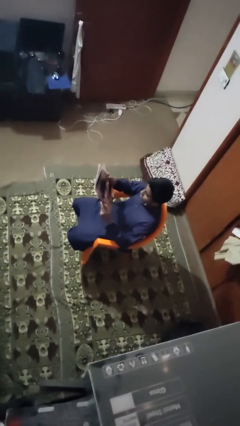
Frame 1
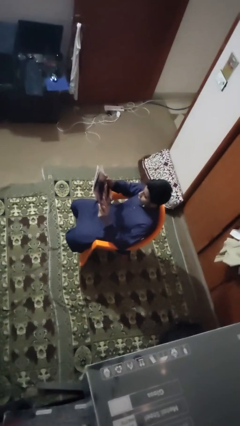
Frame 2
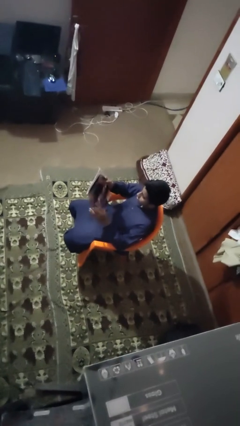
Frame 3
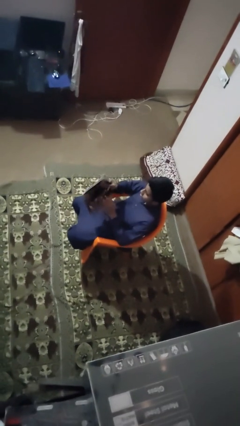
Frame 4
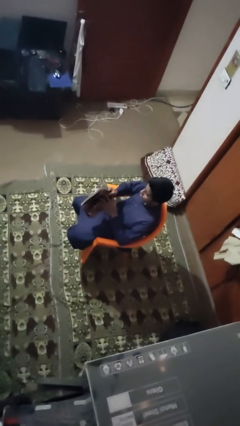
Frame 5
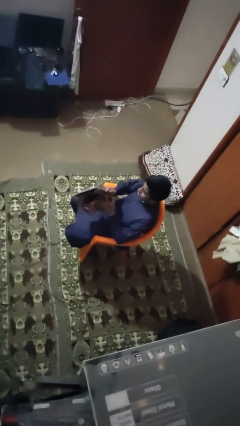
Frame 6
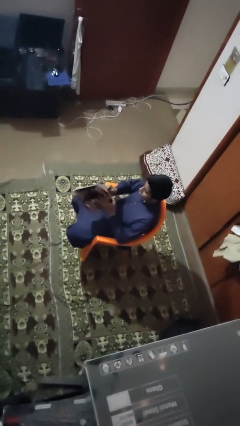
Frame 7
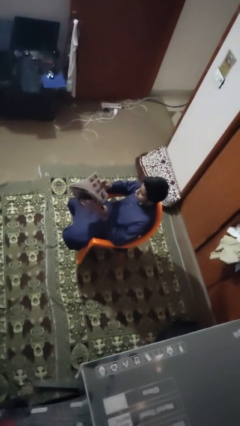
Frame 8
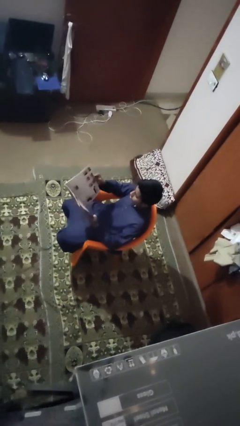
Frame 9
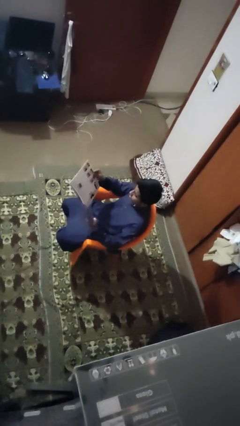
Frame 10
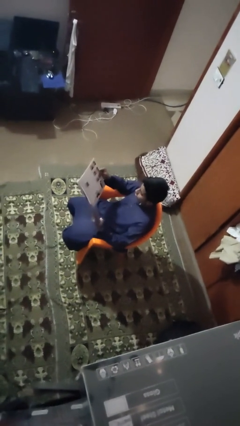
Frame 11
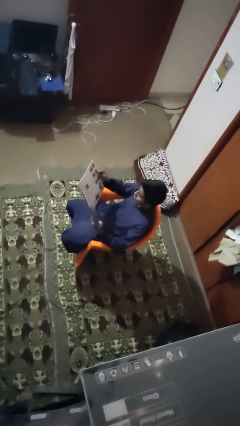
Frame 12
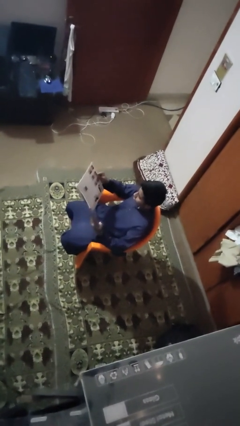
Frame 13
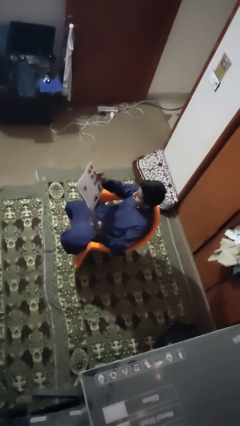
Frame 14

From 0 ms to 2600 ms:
person reads magazine

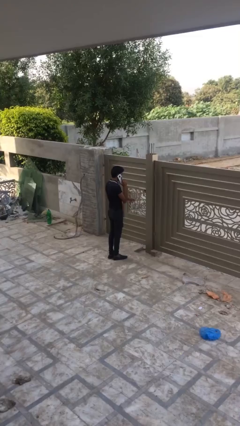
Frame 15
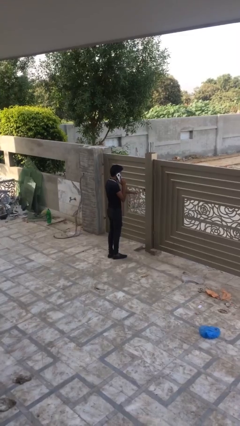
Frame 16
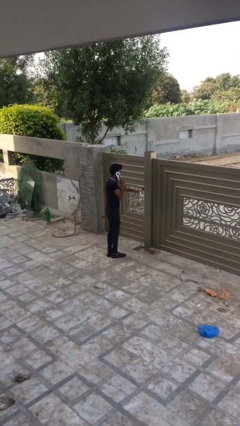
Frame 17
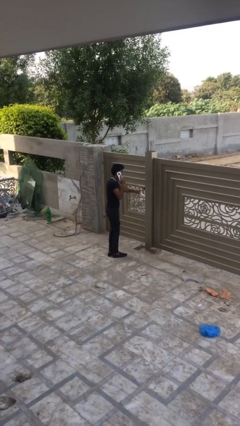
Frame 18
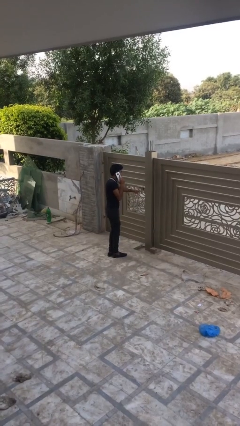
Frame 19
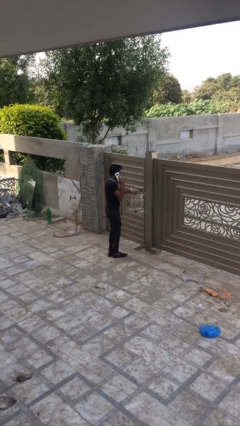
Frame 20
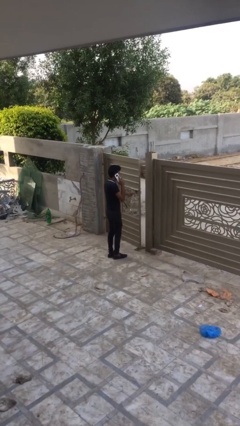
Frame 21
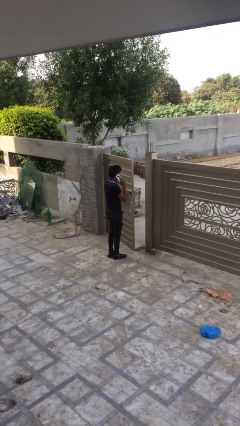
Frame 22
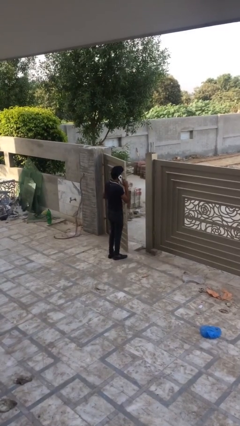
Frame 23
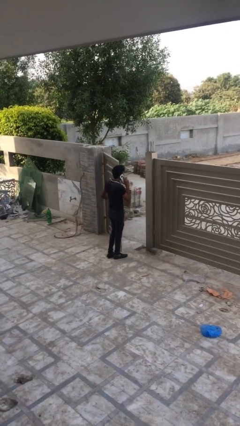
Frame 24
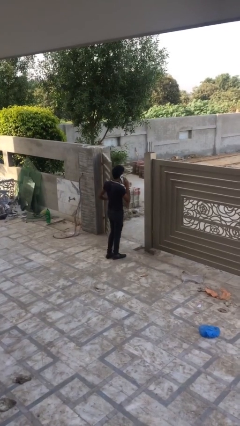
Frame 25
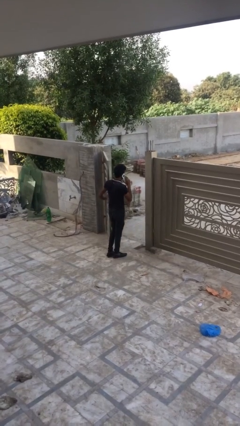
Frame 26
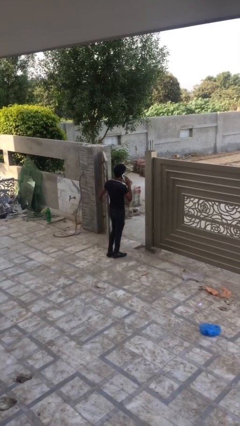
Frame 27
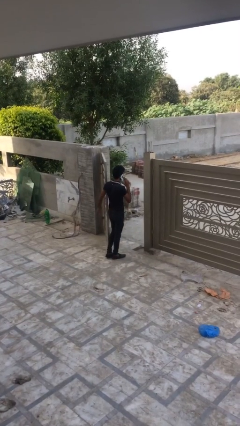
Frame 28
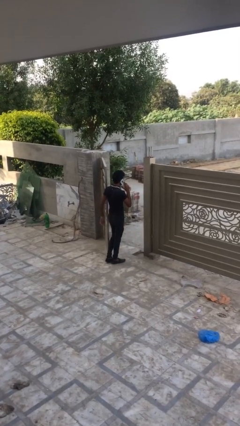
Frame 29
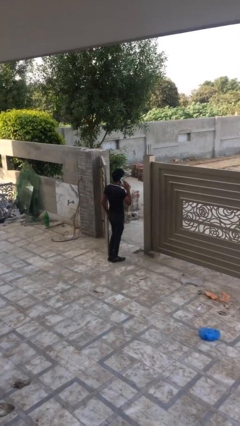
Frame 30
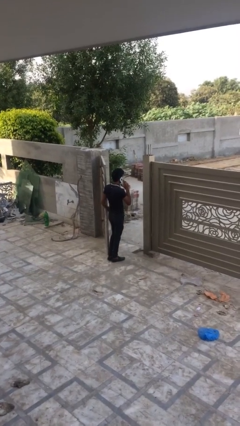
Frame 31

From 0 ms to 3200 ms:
person opens facility door

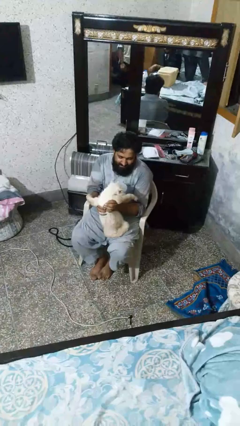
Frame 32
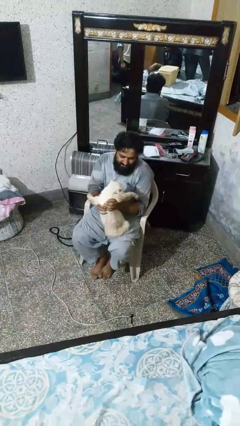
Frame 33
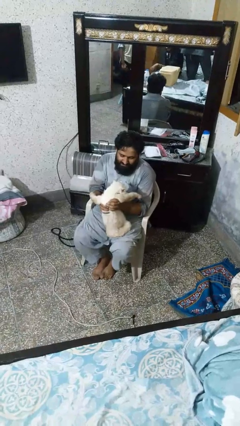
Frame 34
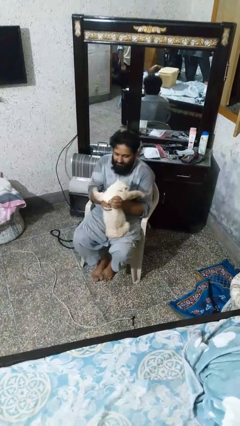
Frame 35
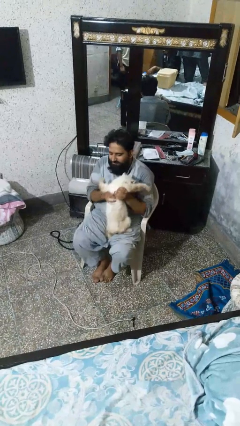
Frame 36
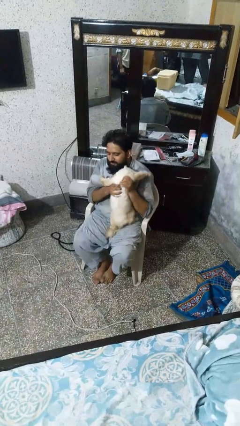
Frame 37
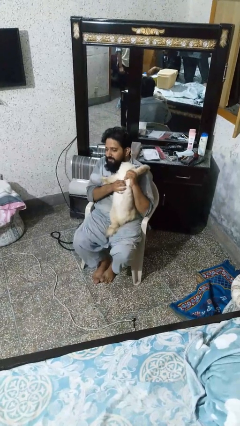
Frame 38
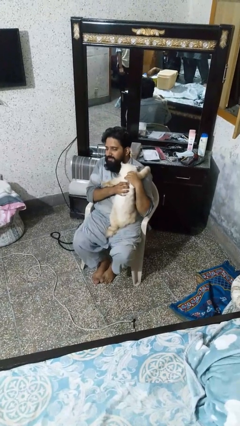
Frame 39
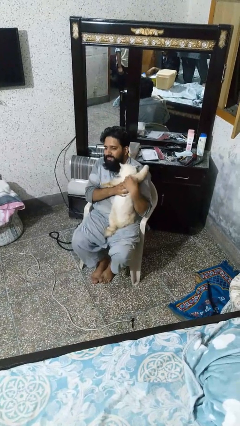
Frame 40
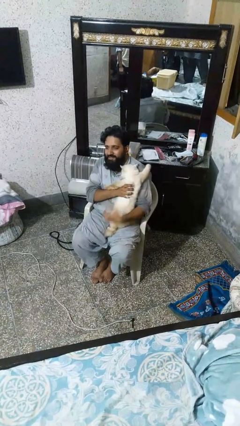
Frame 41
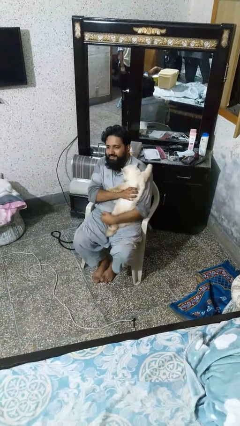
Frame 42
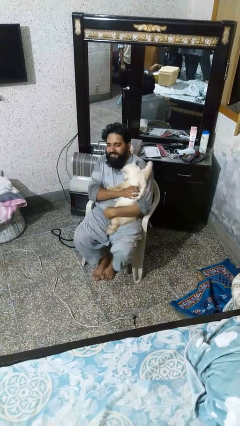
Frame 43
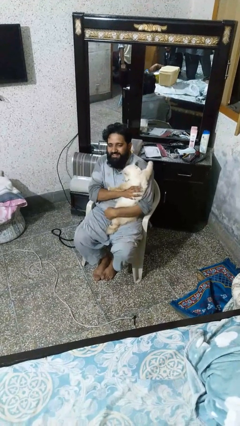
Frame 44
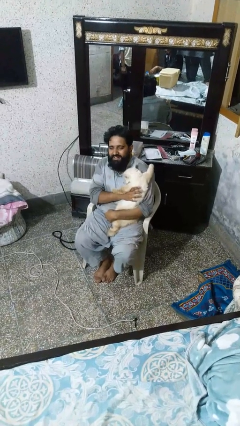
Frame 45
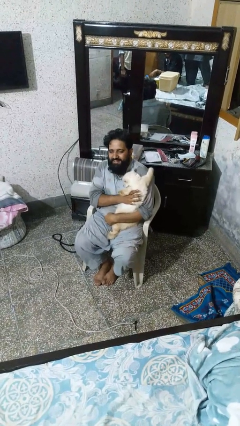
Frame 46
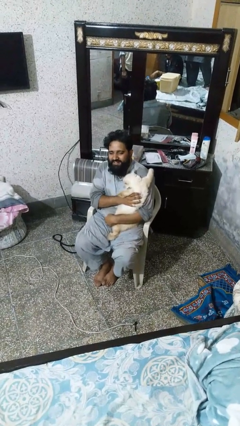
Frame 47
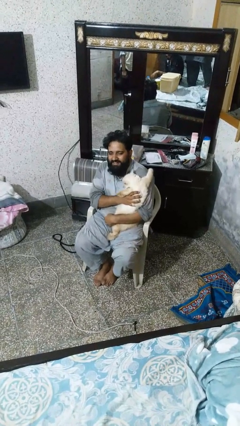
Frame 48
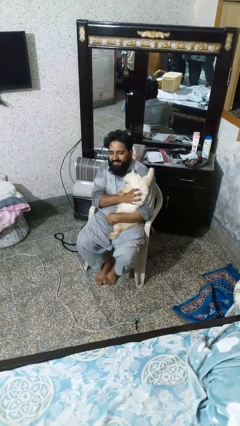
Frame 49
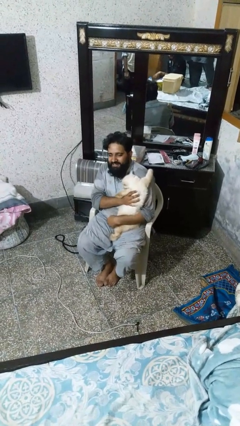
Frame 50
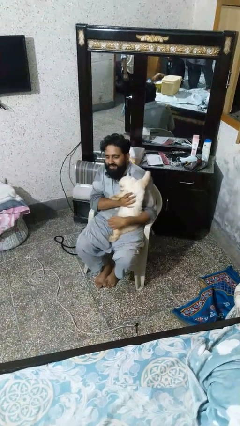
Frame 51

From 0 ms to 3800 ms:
person hugs cat

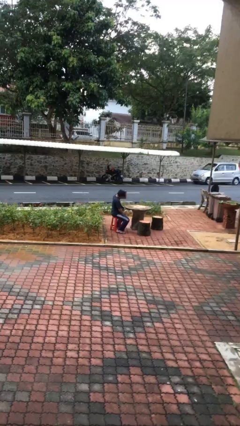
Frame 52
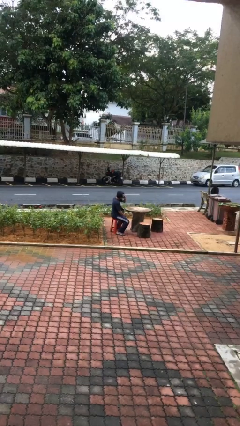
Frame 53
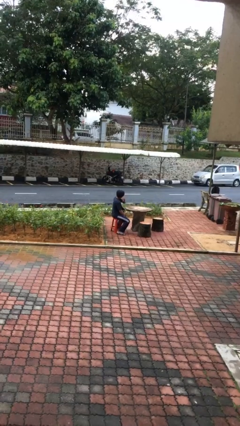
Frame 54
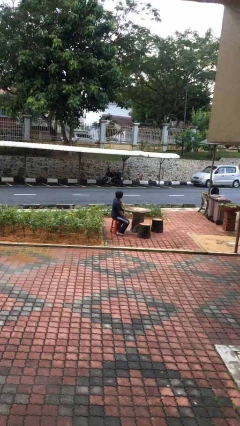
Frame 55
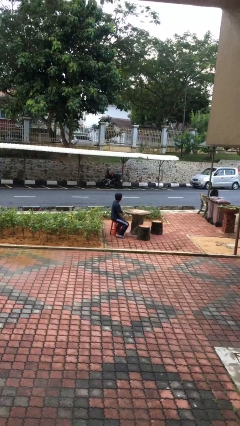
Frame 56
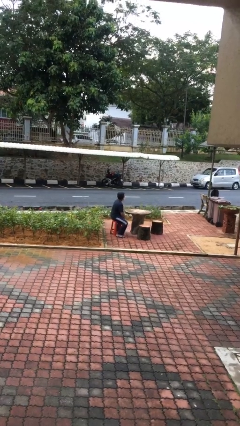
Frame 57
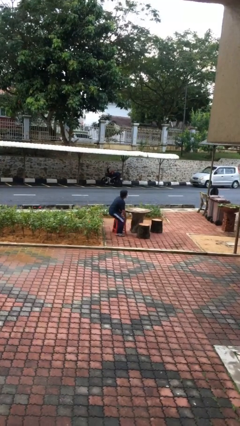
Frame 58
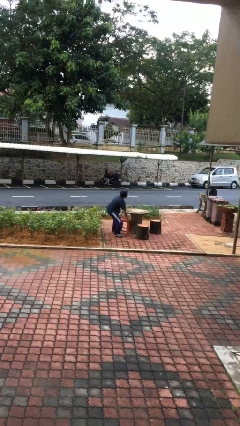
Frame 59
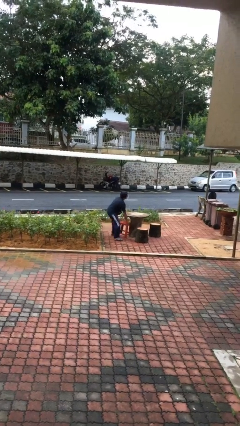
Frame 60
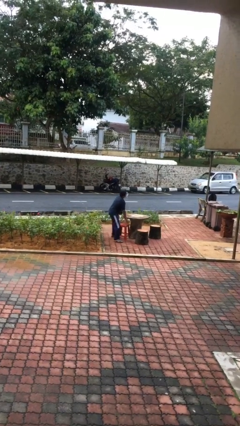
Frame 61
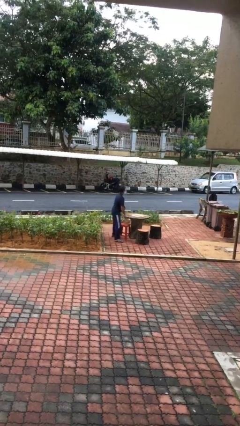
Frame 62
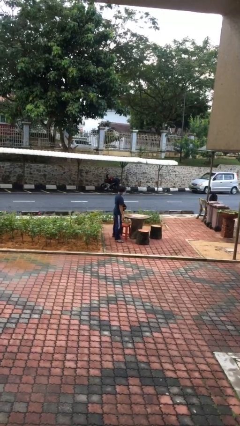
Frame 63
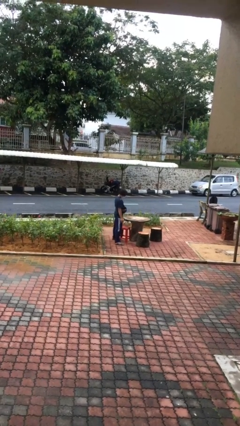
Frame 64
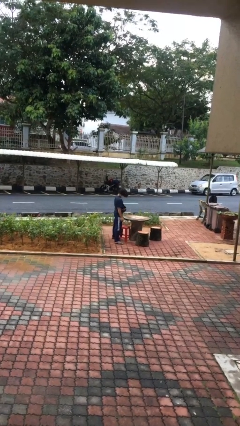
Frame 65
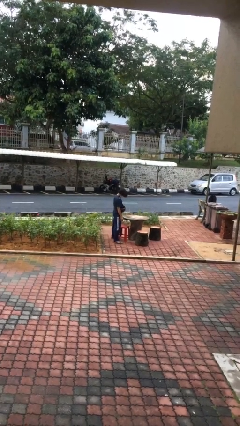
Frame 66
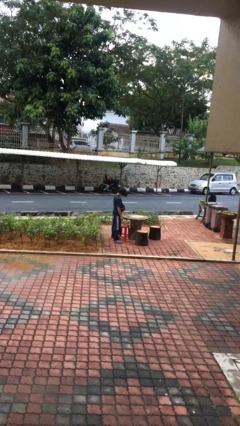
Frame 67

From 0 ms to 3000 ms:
person stands up

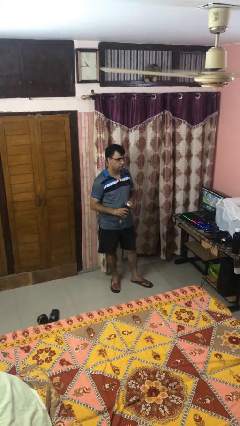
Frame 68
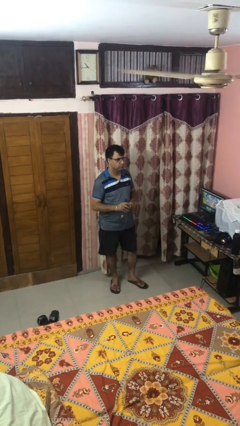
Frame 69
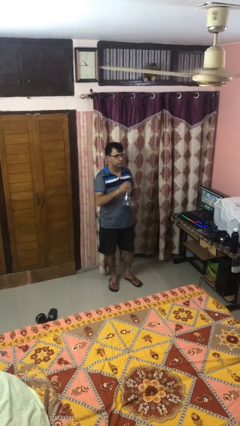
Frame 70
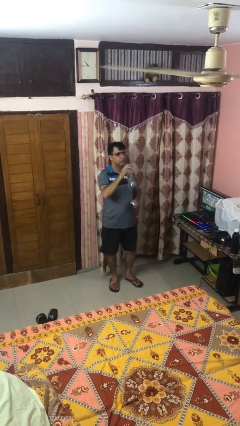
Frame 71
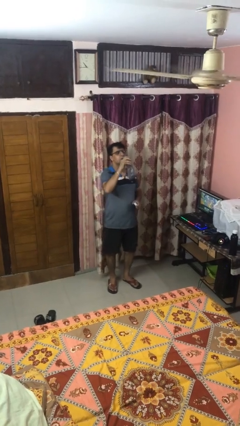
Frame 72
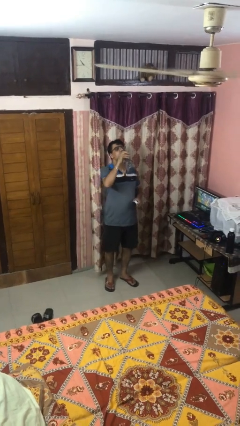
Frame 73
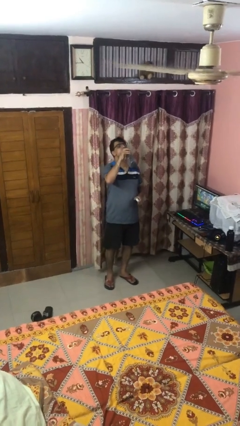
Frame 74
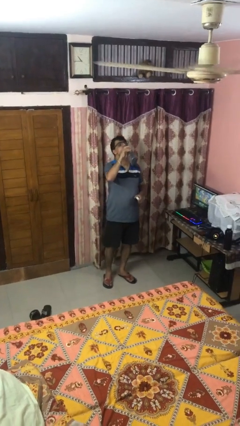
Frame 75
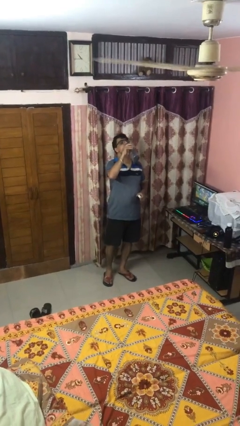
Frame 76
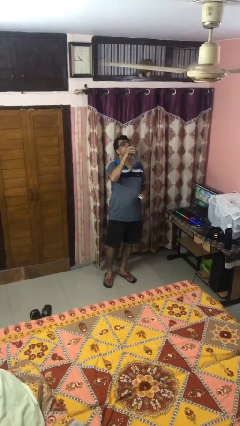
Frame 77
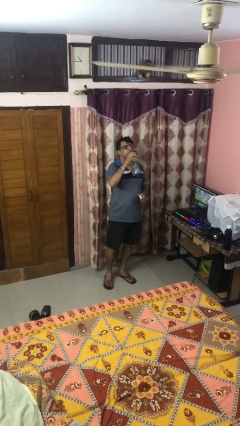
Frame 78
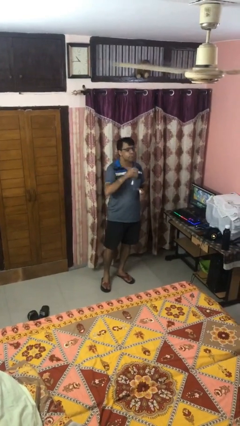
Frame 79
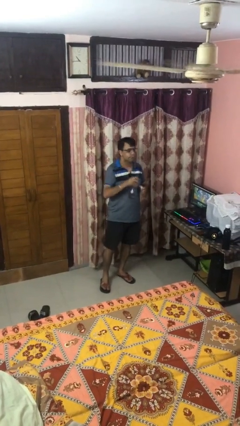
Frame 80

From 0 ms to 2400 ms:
person drinks from bottle

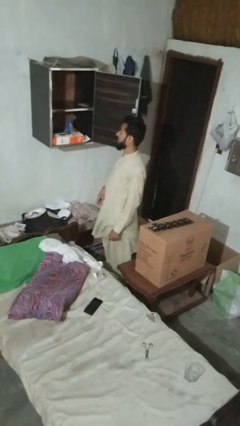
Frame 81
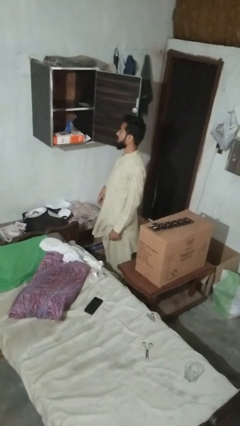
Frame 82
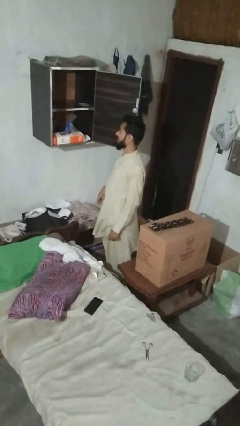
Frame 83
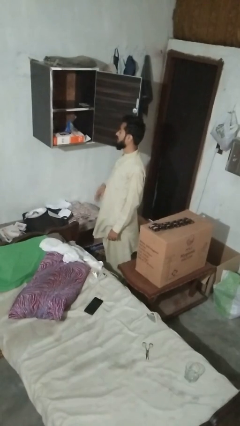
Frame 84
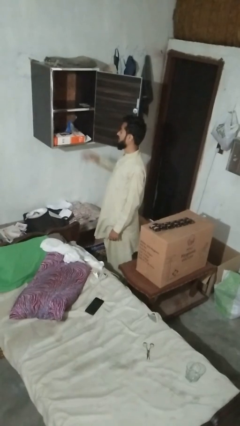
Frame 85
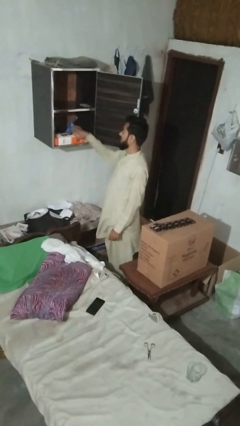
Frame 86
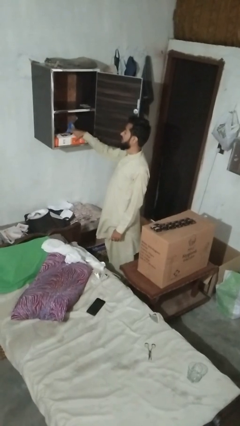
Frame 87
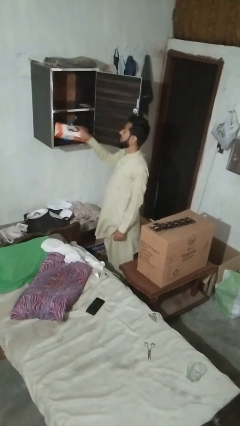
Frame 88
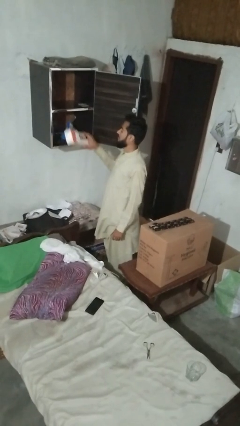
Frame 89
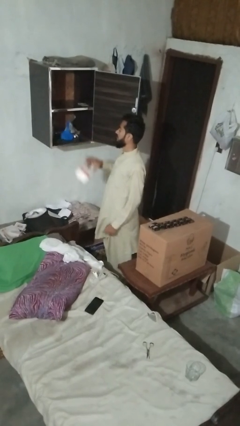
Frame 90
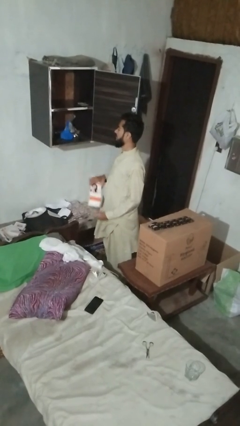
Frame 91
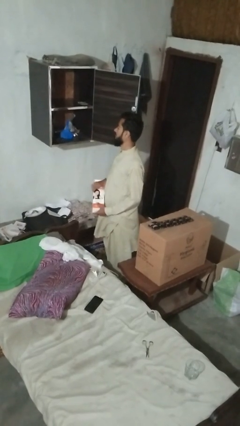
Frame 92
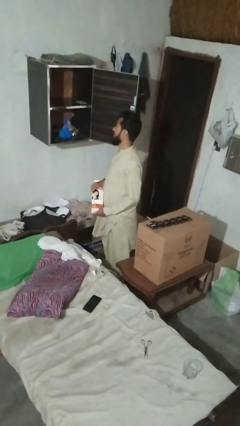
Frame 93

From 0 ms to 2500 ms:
person picks up object from cabinet
